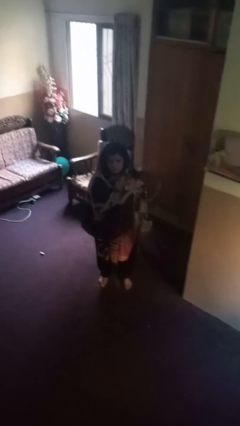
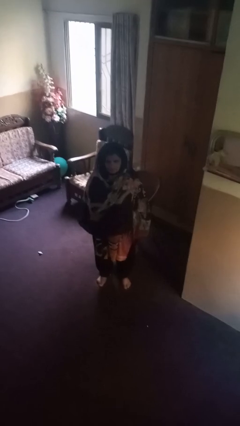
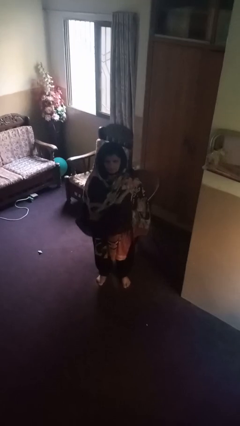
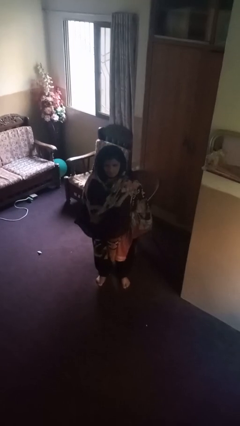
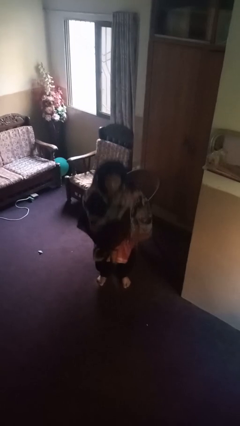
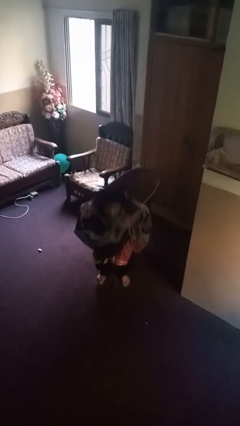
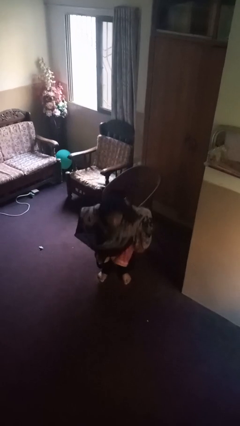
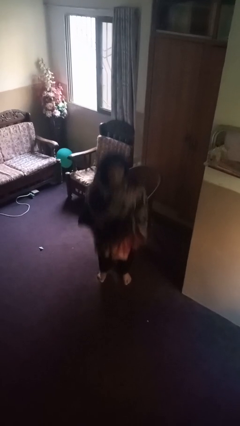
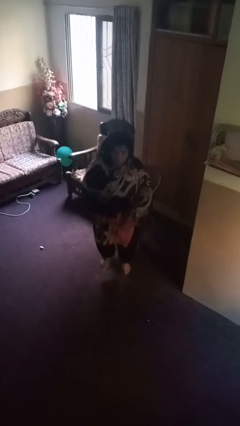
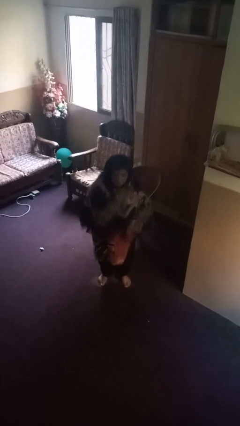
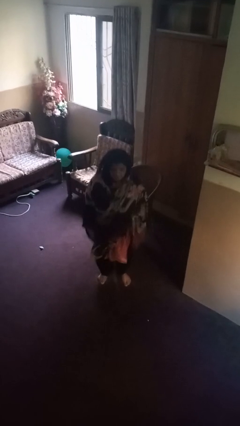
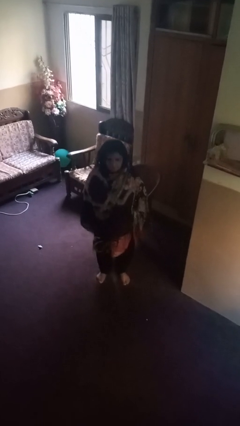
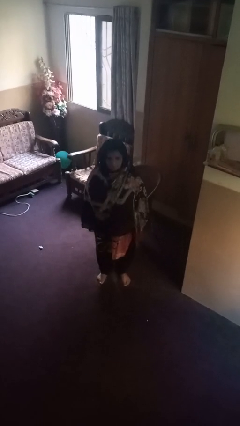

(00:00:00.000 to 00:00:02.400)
person jumps

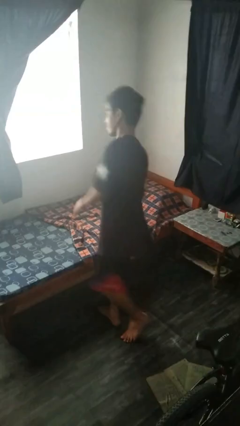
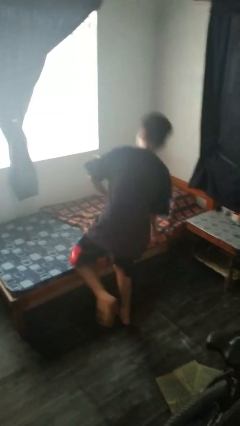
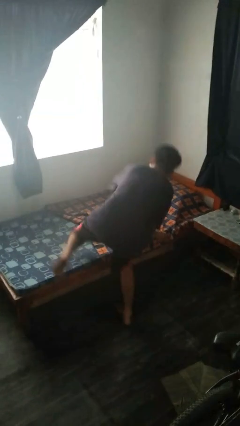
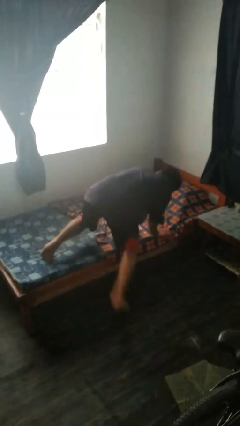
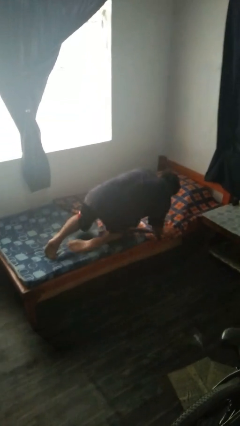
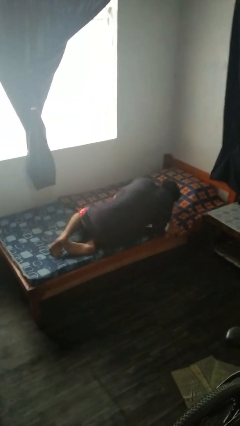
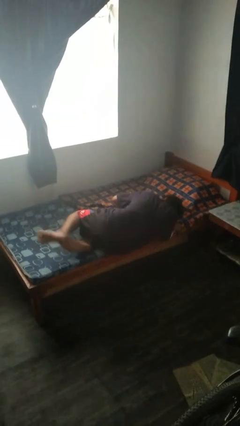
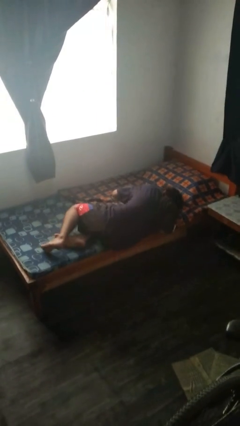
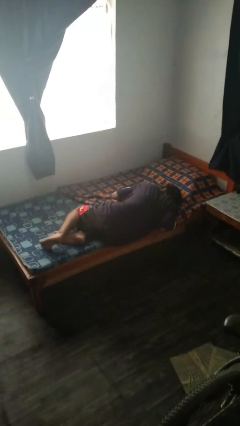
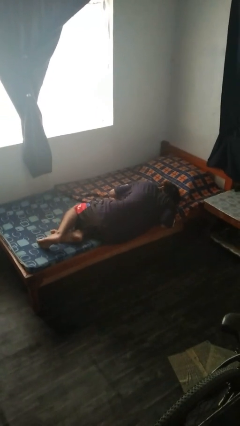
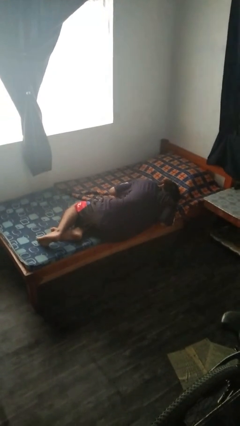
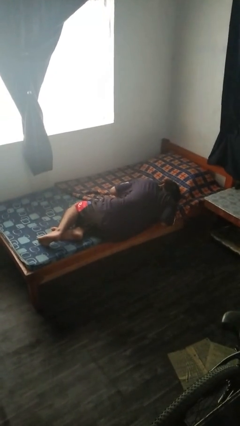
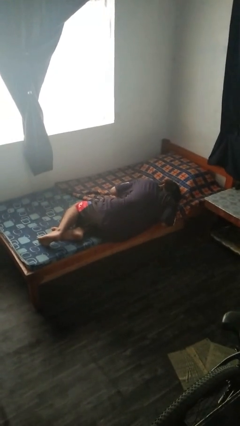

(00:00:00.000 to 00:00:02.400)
person lies down on bed

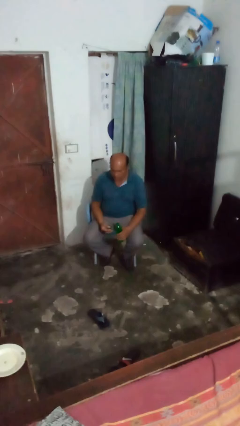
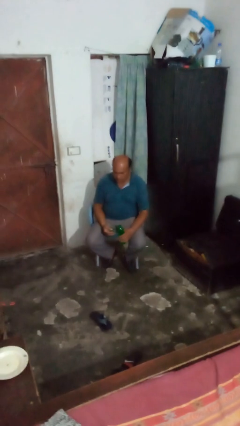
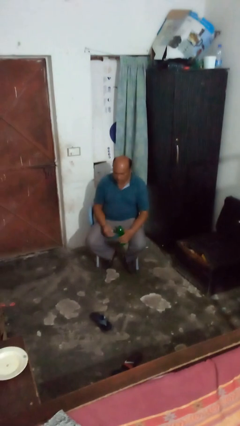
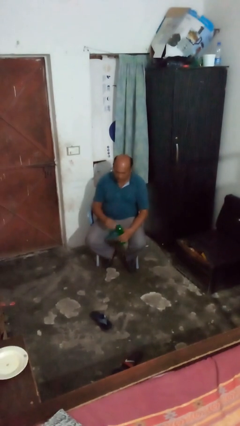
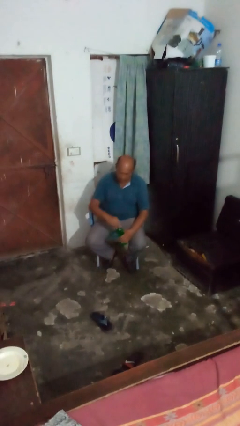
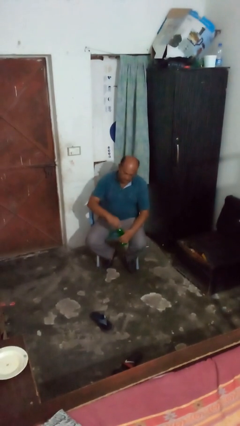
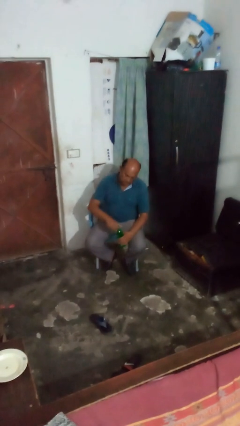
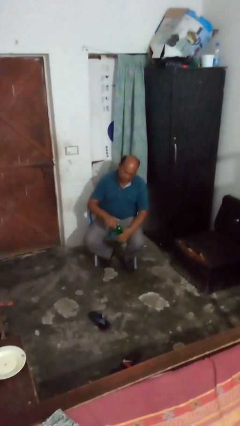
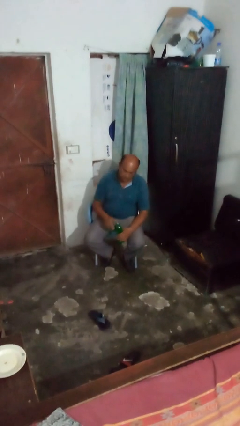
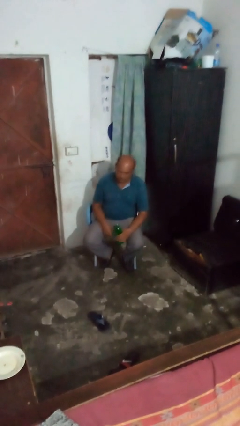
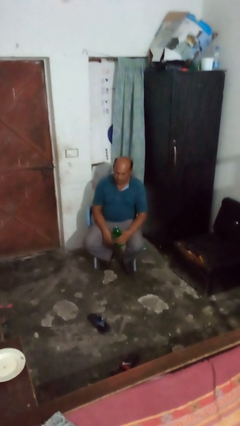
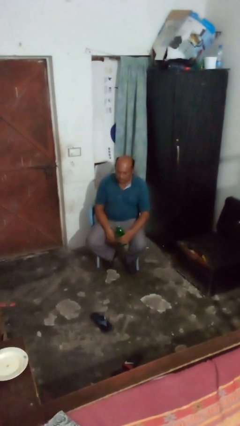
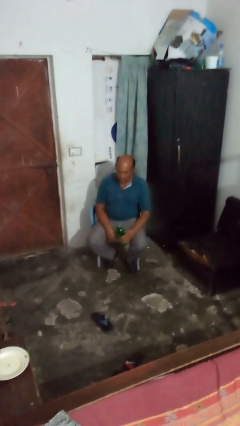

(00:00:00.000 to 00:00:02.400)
person screws lid to bottle

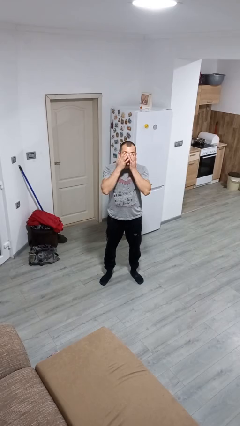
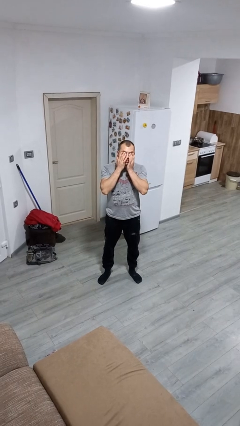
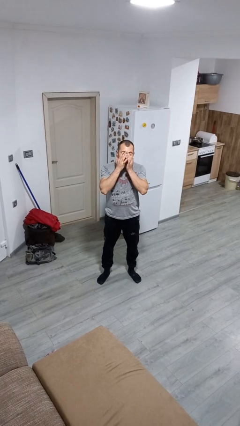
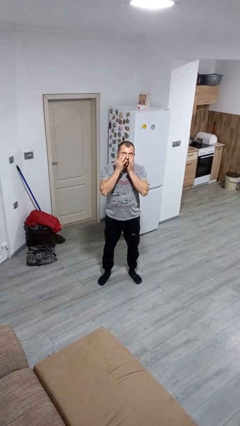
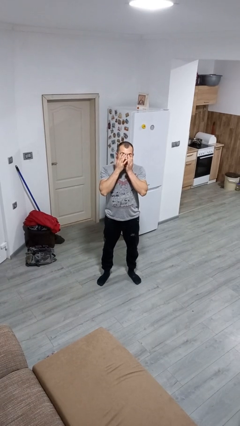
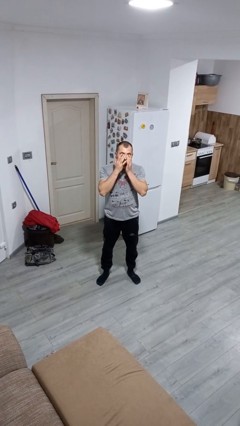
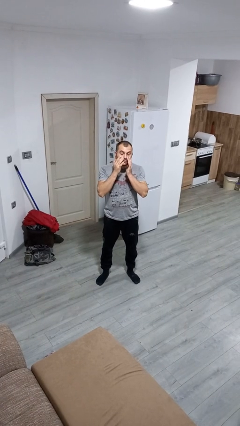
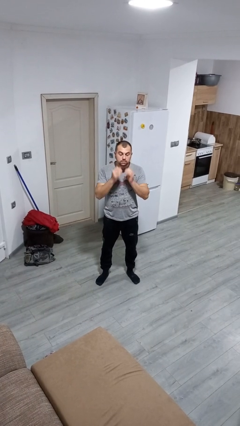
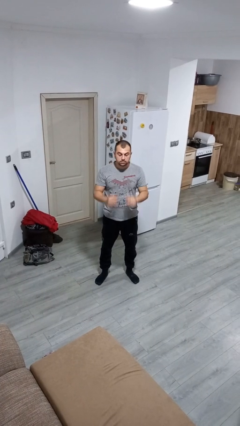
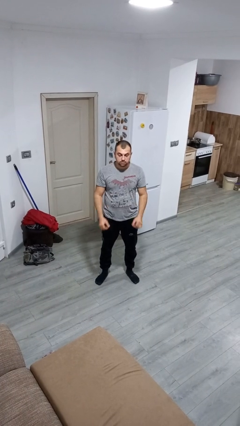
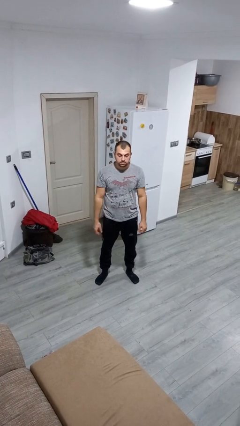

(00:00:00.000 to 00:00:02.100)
person rubs eyes

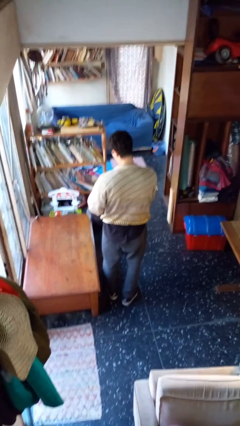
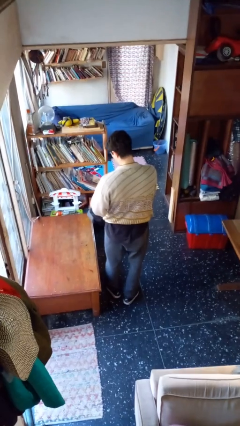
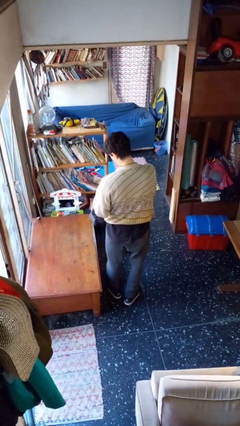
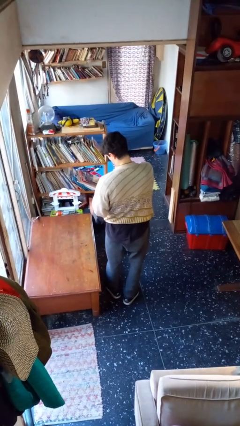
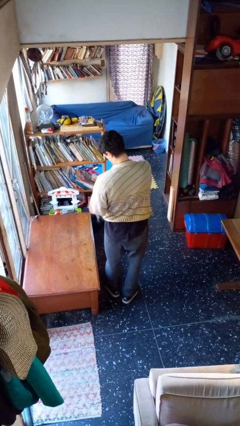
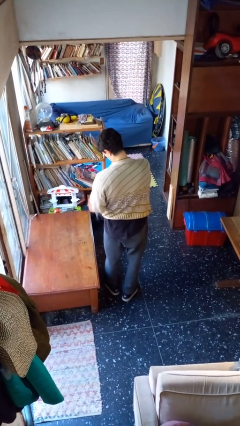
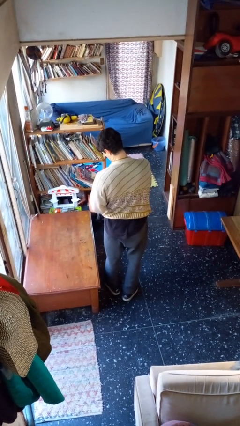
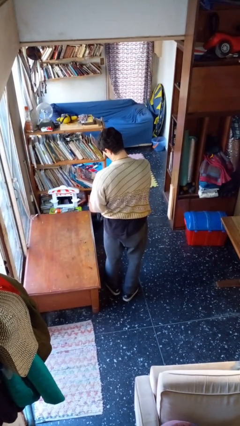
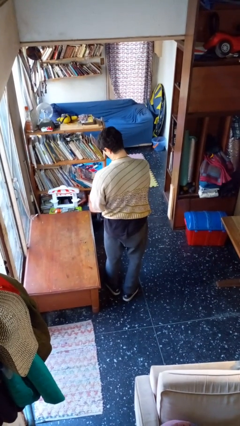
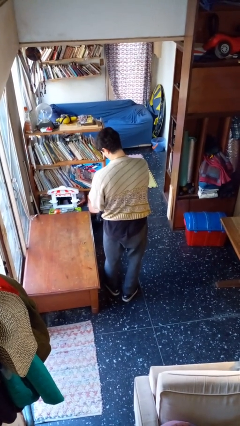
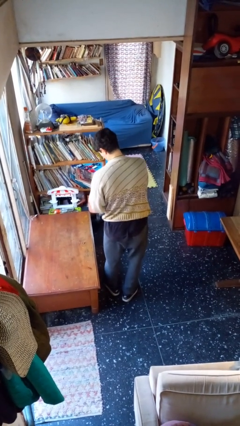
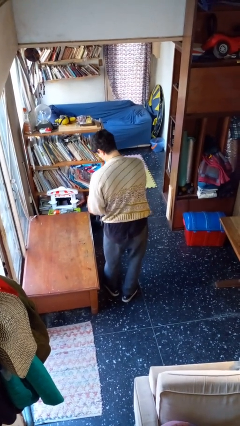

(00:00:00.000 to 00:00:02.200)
person searches in backpack

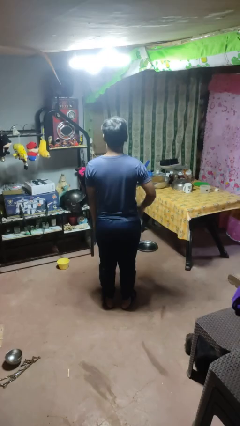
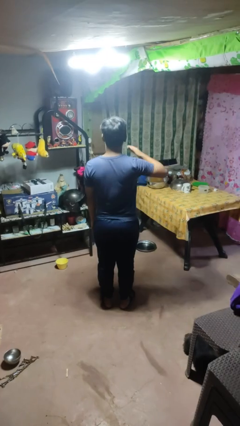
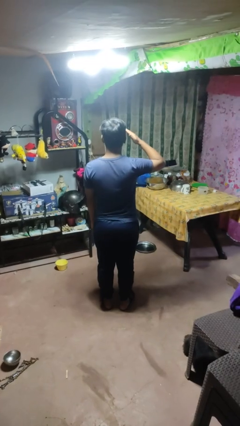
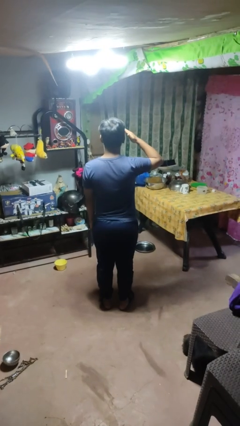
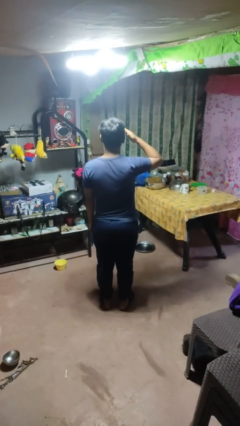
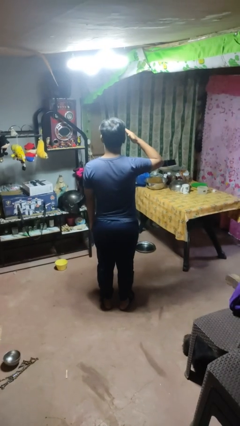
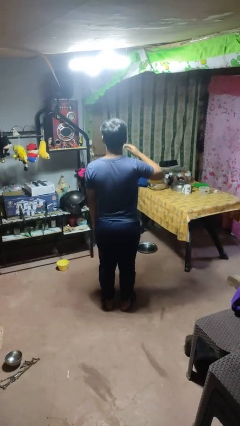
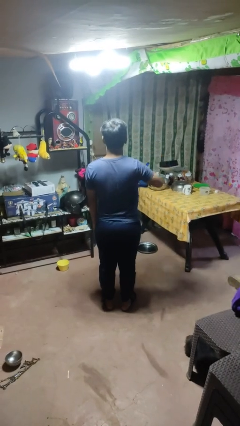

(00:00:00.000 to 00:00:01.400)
person salutes

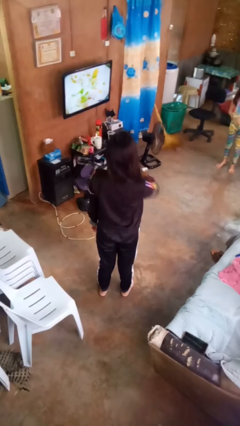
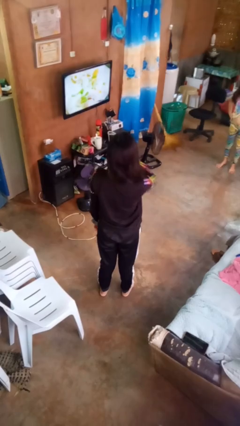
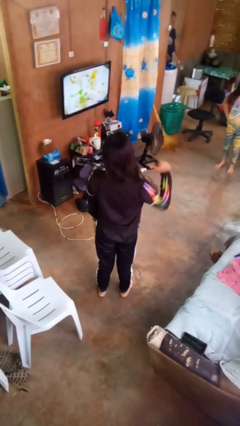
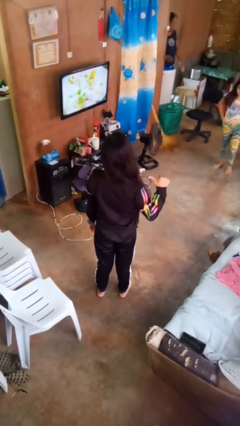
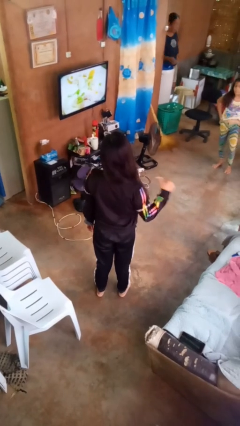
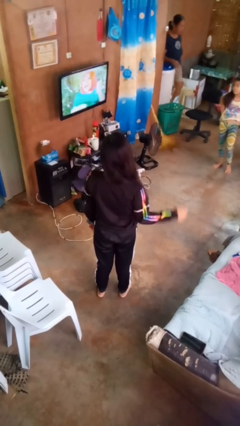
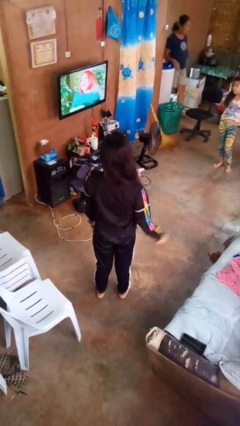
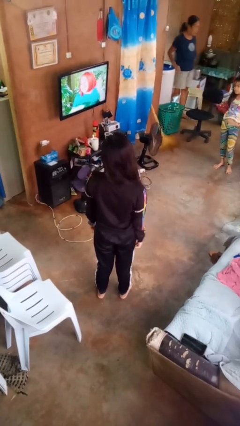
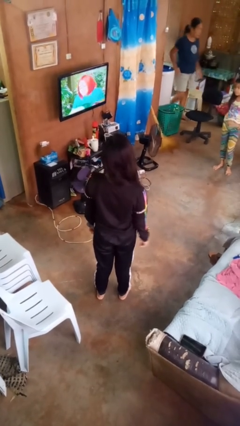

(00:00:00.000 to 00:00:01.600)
person gestures cut

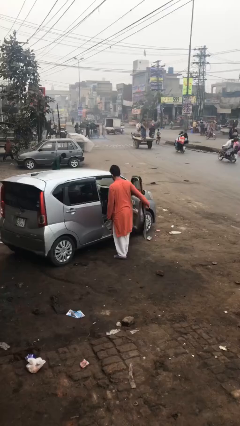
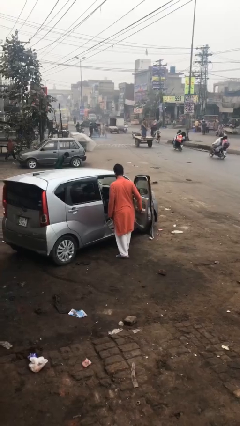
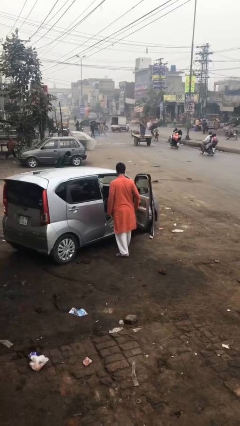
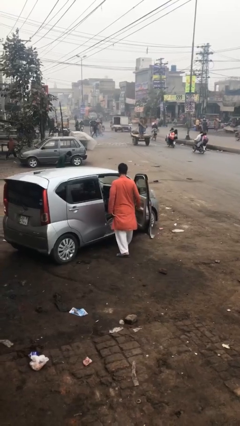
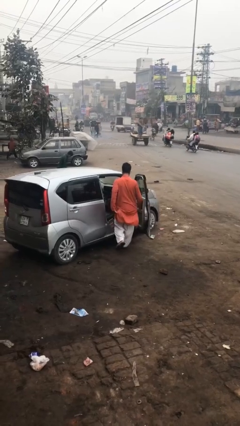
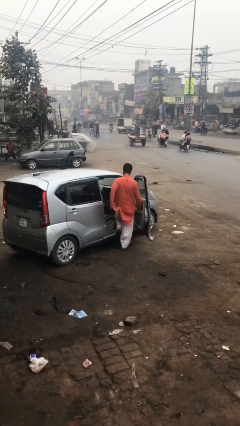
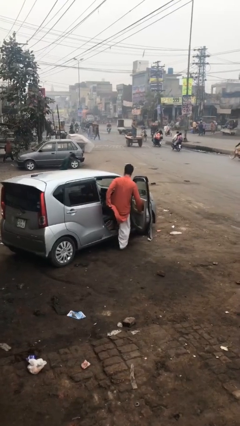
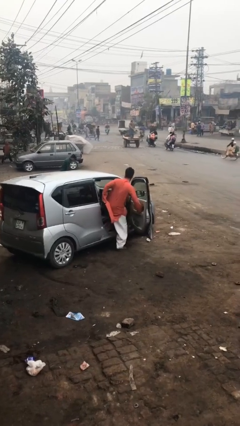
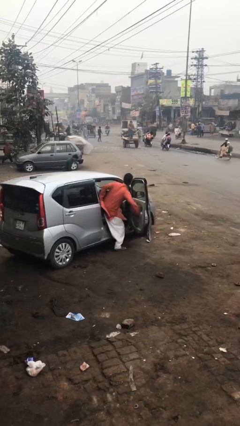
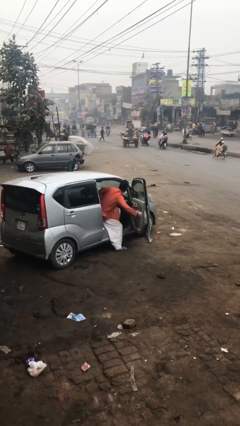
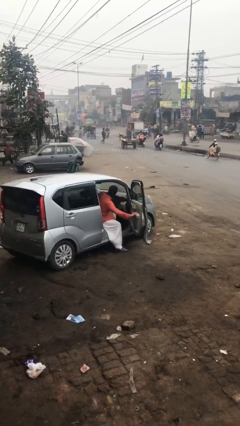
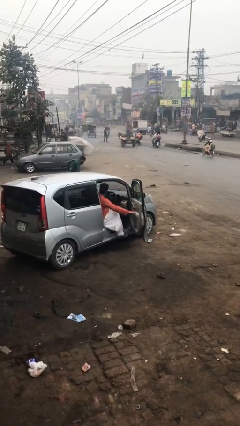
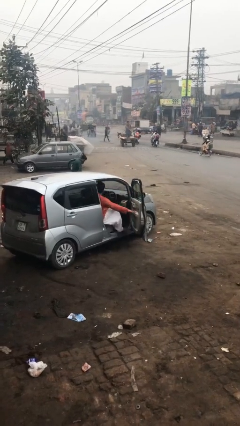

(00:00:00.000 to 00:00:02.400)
person enters car
